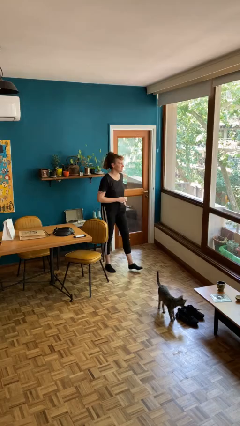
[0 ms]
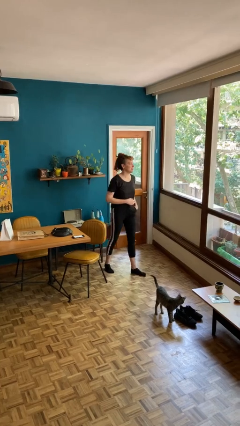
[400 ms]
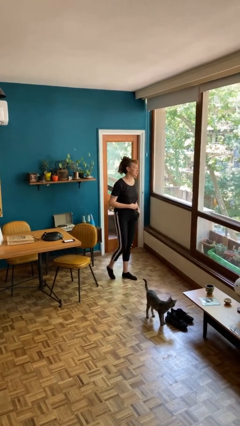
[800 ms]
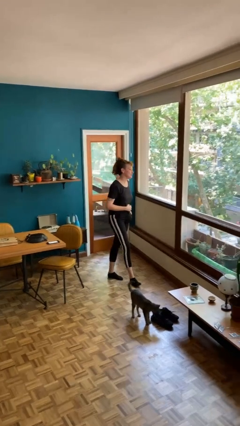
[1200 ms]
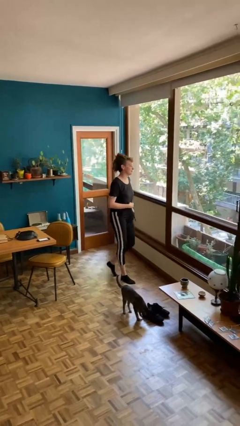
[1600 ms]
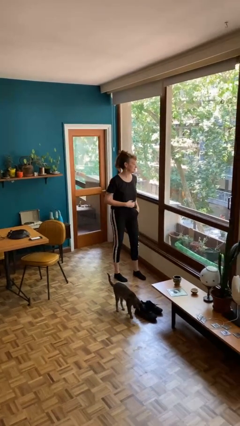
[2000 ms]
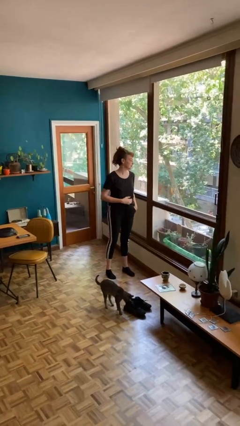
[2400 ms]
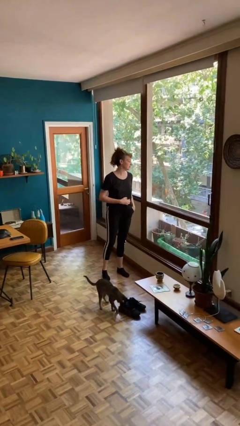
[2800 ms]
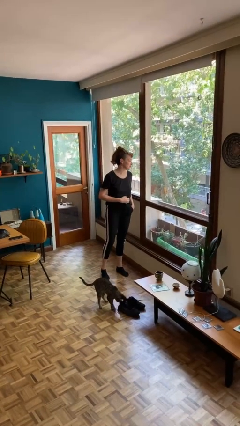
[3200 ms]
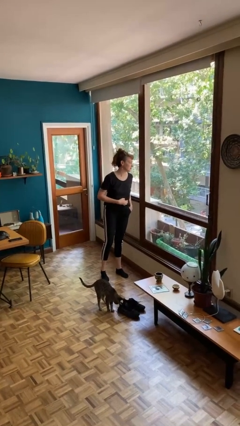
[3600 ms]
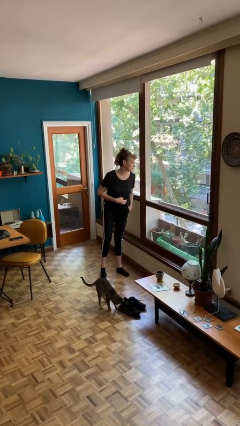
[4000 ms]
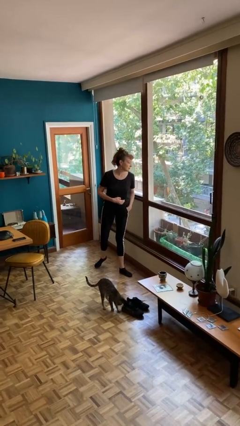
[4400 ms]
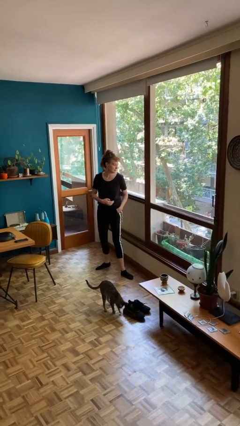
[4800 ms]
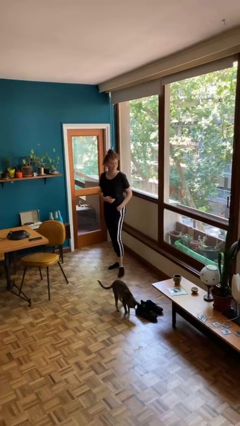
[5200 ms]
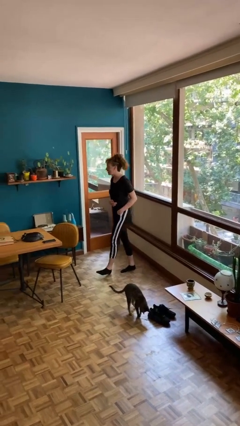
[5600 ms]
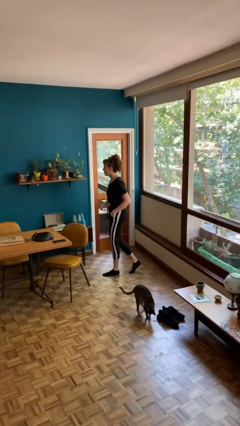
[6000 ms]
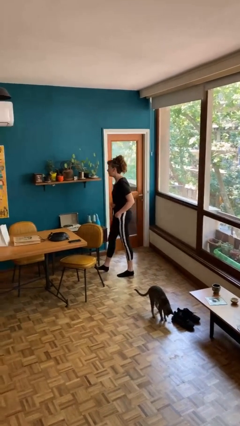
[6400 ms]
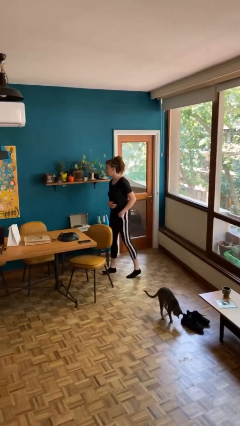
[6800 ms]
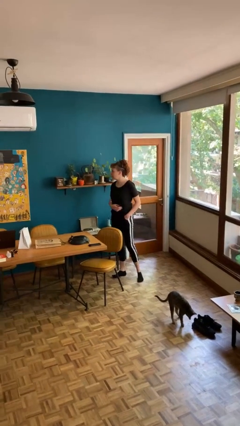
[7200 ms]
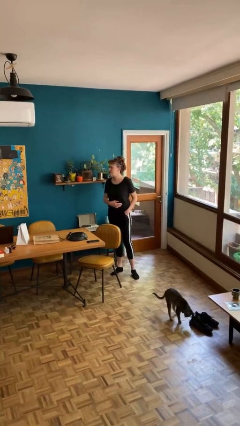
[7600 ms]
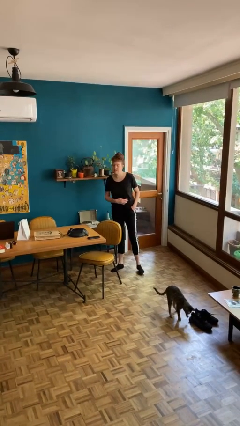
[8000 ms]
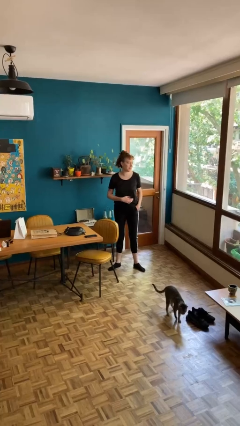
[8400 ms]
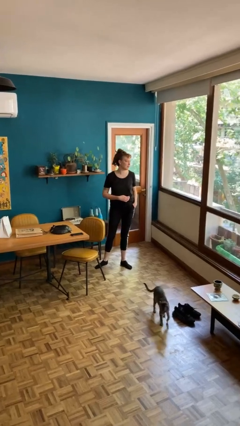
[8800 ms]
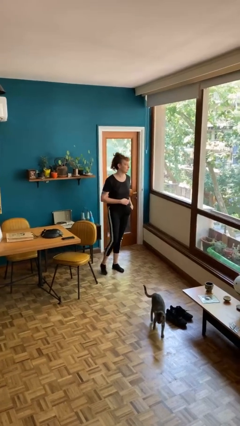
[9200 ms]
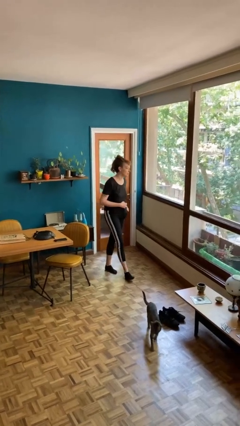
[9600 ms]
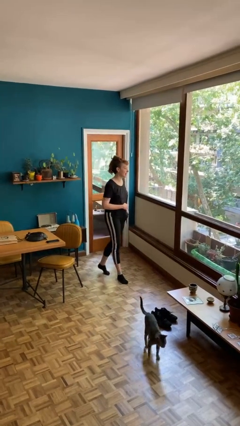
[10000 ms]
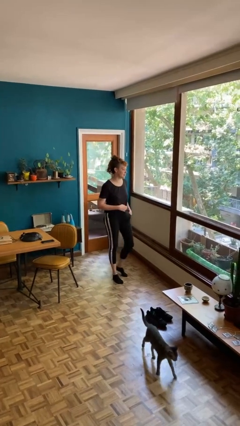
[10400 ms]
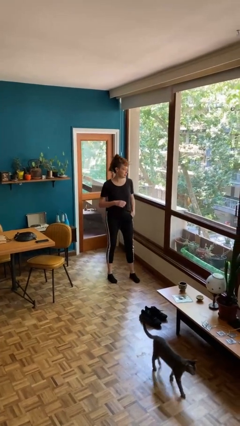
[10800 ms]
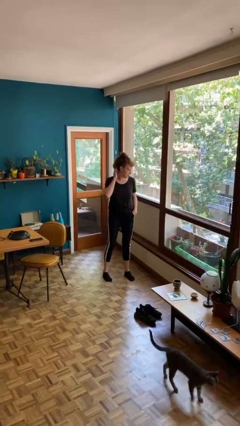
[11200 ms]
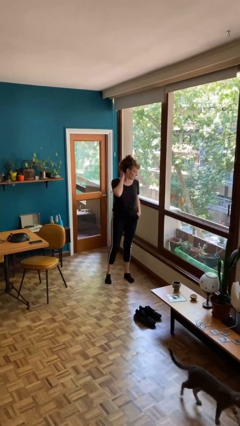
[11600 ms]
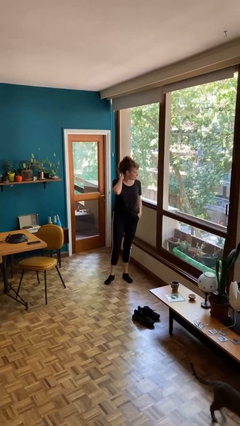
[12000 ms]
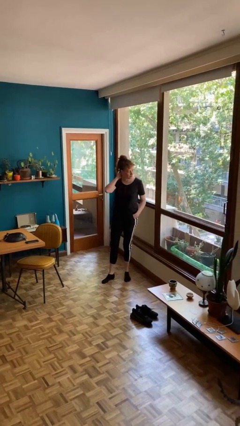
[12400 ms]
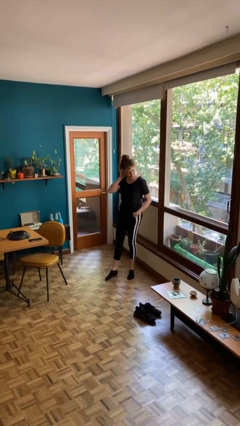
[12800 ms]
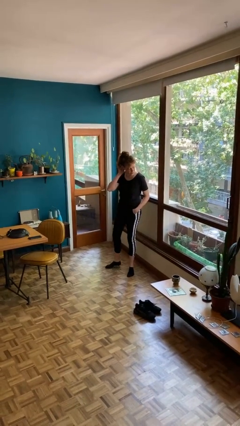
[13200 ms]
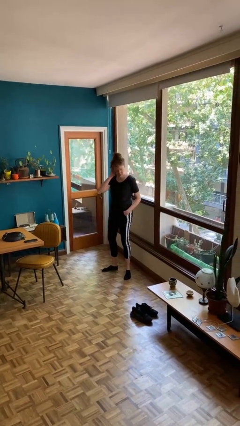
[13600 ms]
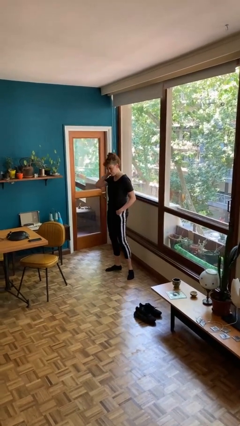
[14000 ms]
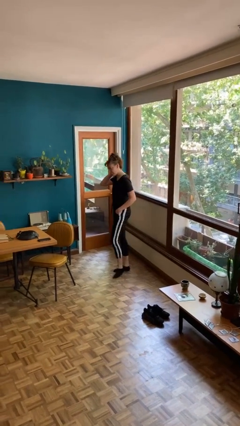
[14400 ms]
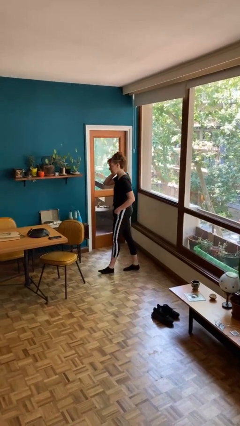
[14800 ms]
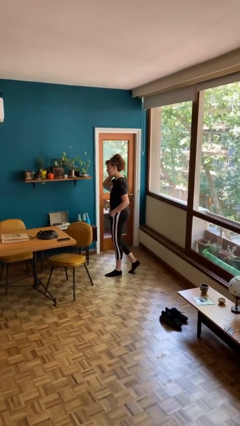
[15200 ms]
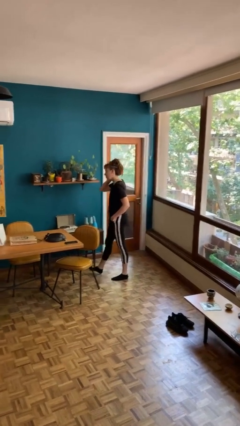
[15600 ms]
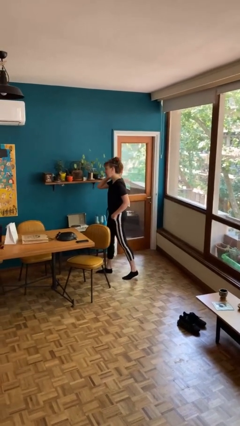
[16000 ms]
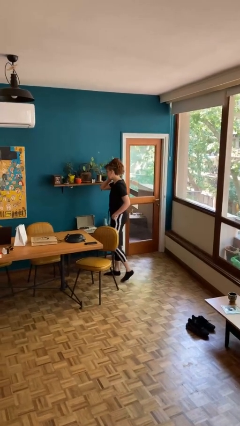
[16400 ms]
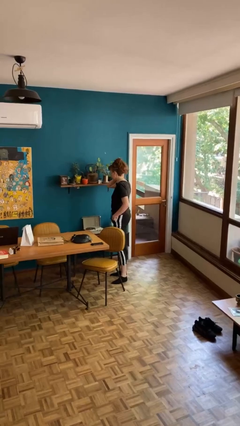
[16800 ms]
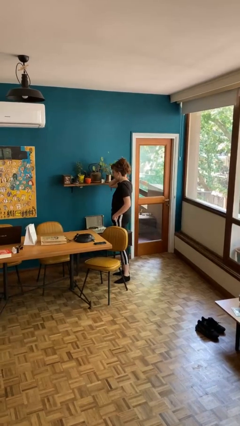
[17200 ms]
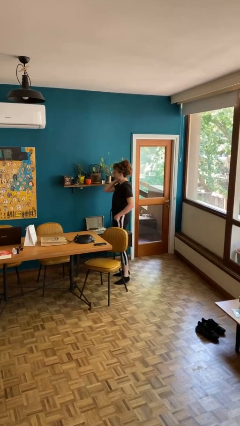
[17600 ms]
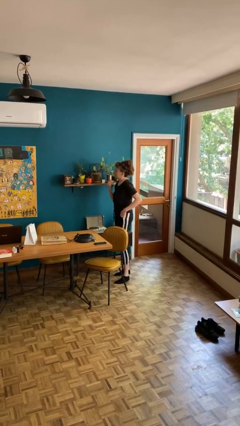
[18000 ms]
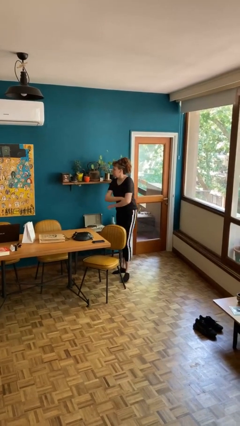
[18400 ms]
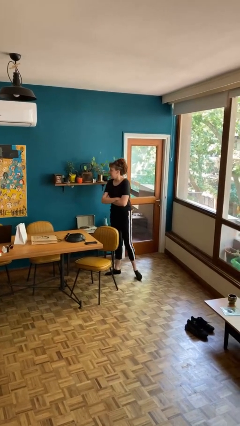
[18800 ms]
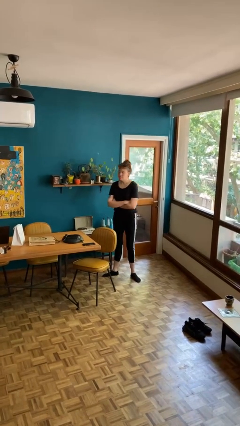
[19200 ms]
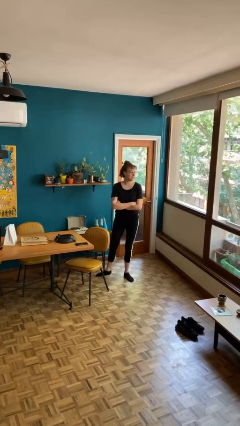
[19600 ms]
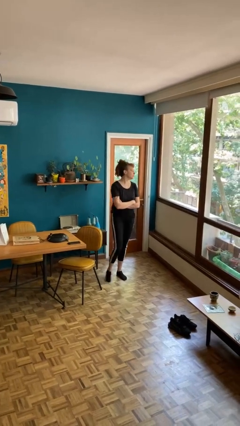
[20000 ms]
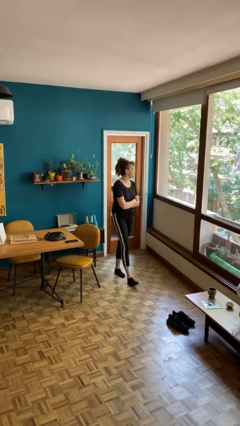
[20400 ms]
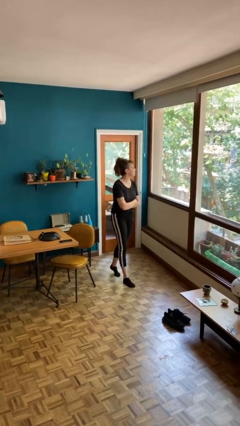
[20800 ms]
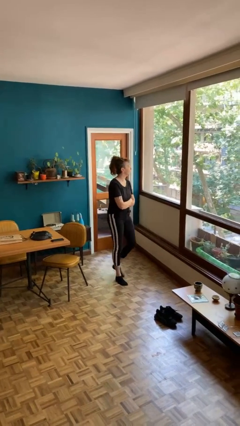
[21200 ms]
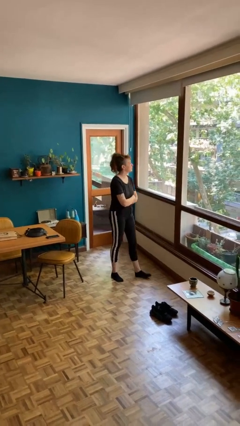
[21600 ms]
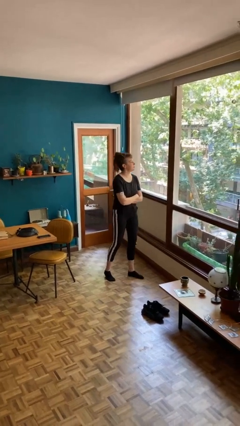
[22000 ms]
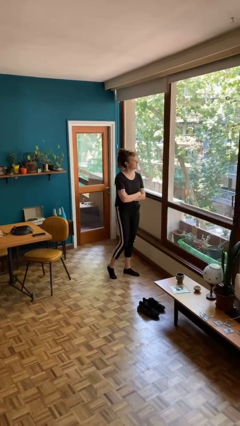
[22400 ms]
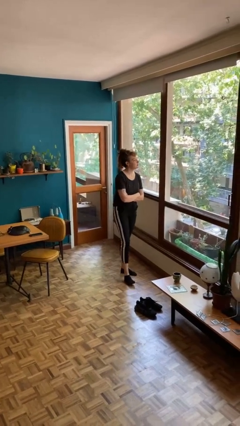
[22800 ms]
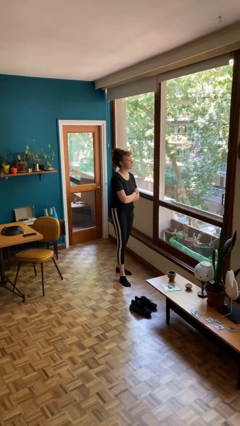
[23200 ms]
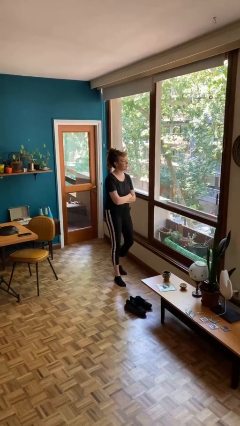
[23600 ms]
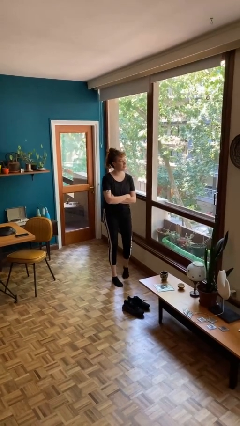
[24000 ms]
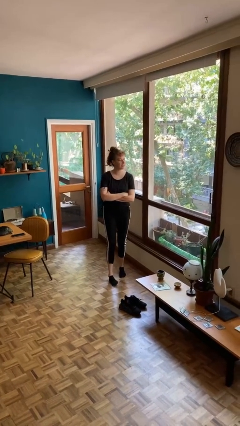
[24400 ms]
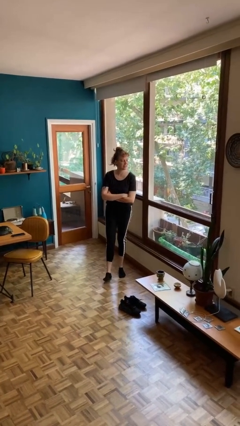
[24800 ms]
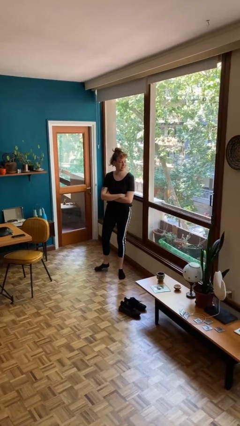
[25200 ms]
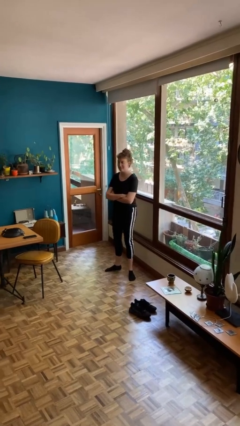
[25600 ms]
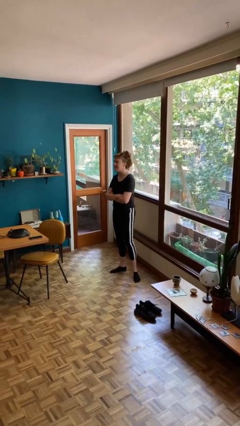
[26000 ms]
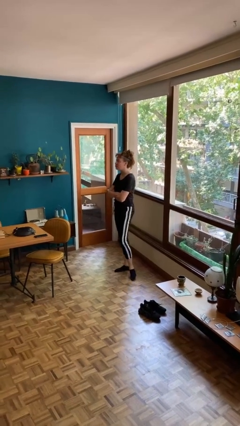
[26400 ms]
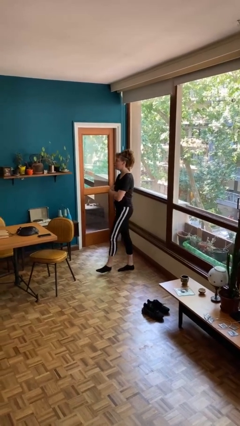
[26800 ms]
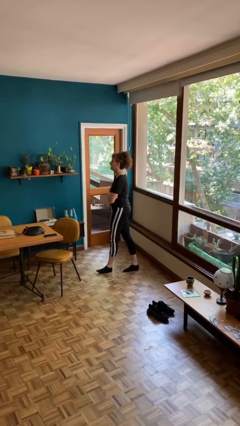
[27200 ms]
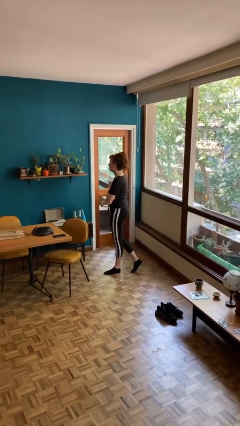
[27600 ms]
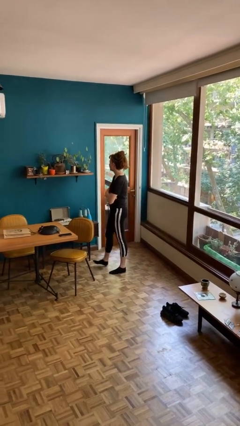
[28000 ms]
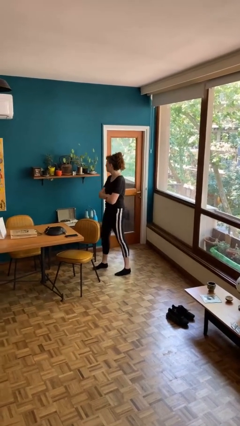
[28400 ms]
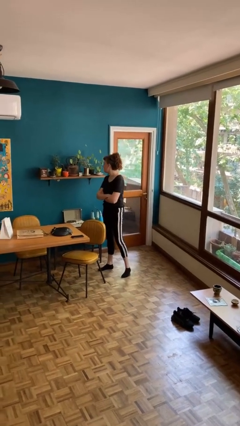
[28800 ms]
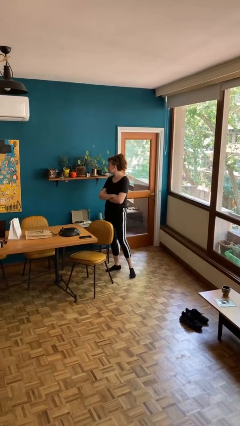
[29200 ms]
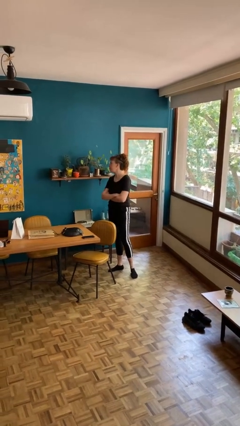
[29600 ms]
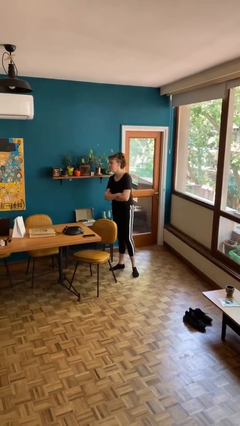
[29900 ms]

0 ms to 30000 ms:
person walks

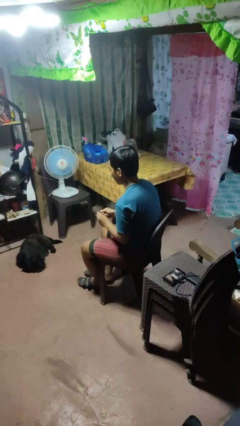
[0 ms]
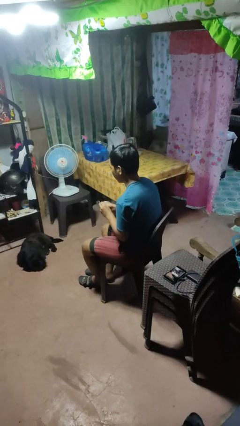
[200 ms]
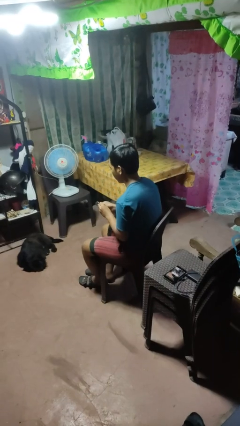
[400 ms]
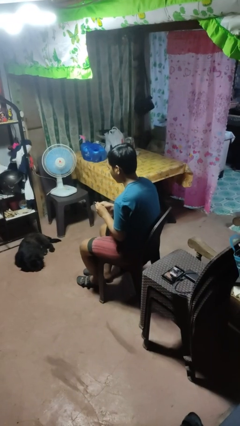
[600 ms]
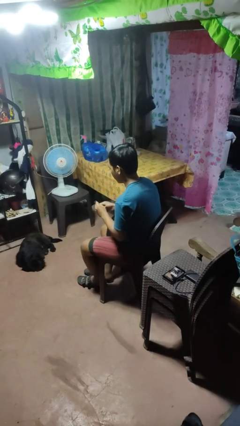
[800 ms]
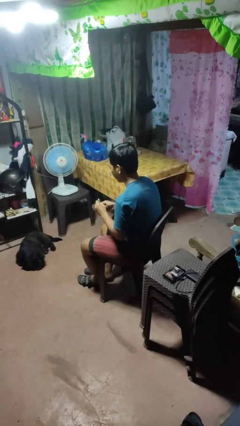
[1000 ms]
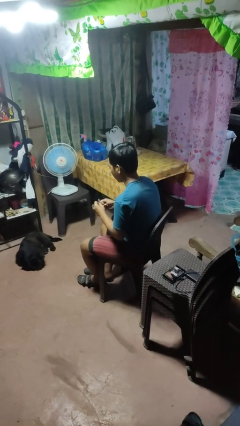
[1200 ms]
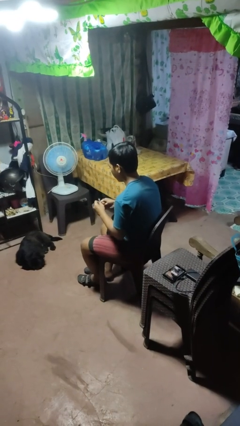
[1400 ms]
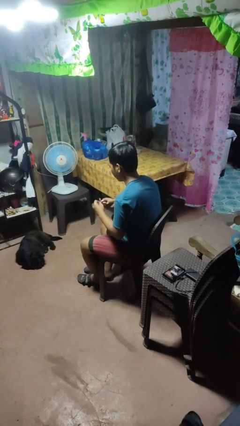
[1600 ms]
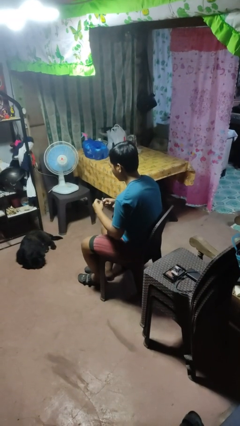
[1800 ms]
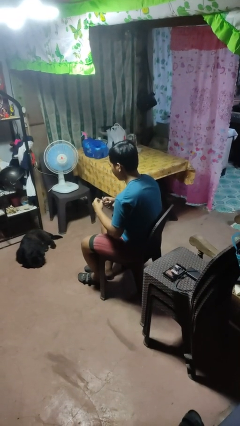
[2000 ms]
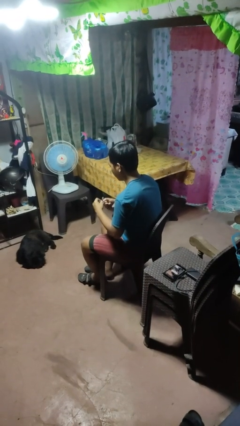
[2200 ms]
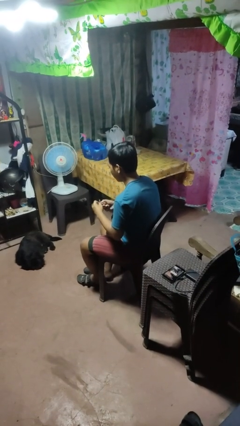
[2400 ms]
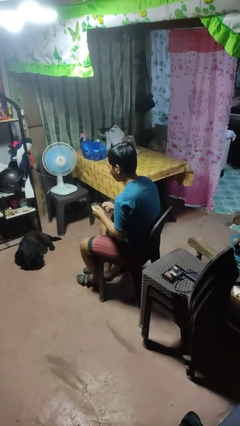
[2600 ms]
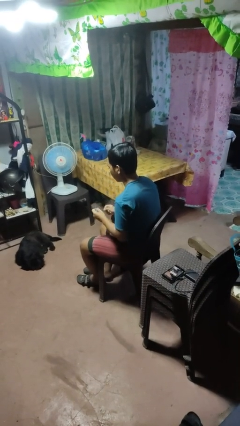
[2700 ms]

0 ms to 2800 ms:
person files fingernails

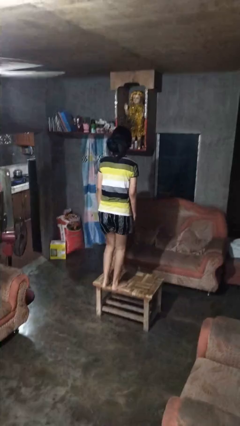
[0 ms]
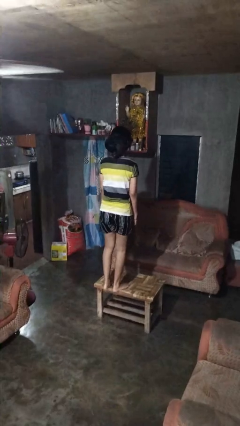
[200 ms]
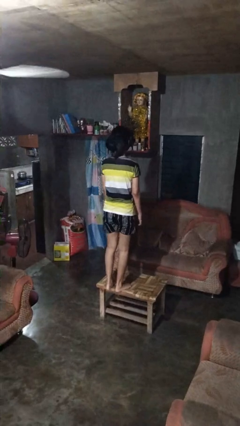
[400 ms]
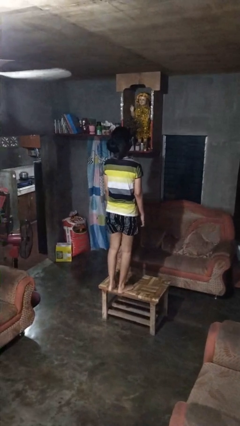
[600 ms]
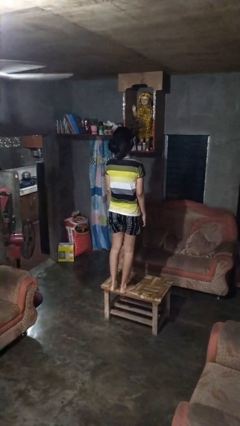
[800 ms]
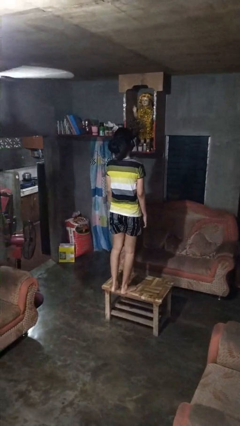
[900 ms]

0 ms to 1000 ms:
person climbs off table
